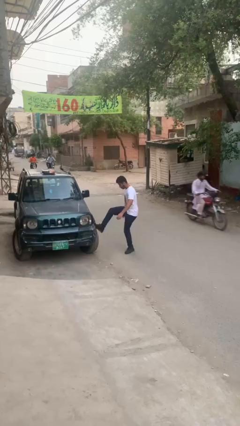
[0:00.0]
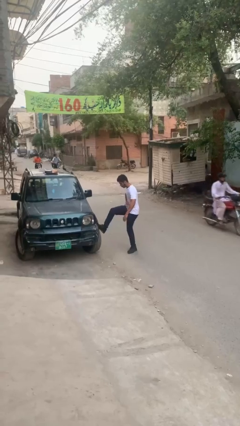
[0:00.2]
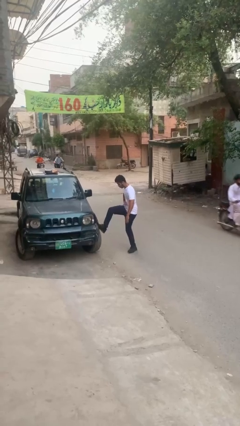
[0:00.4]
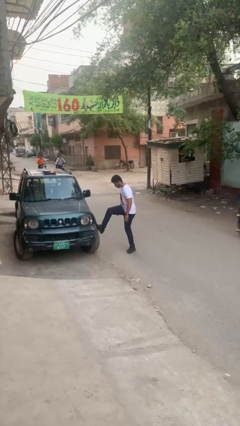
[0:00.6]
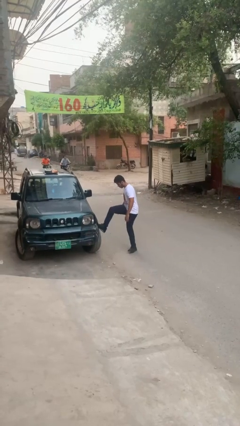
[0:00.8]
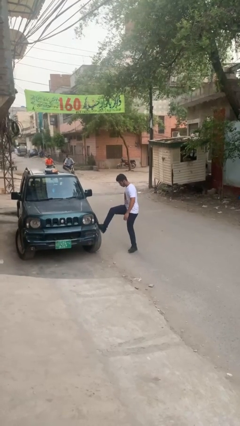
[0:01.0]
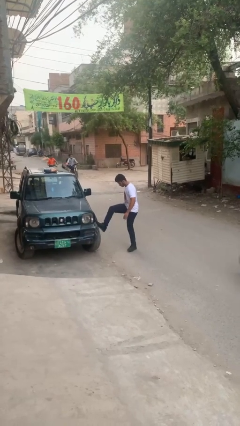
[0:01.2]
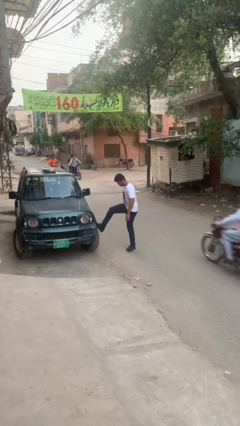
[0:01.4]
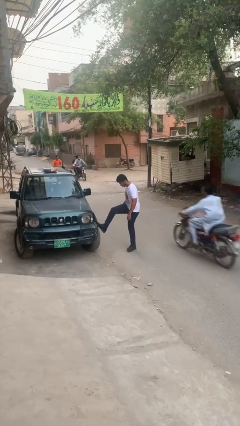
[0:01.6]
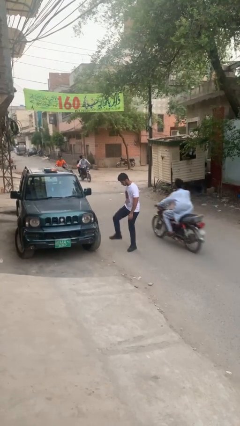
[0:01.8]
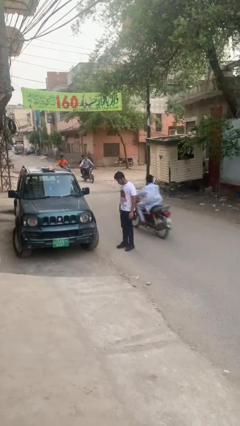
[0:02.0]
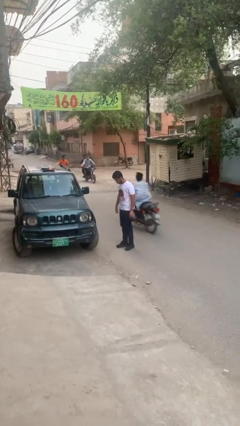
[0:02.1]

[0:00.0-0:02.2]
person kicks car tires

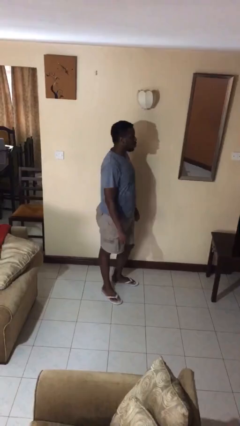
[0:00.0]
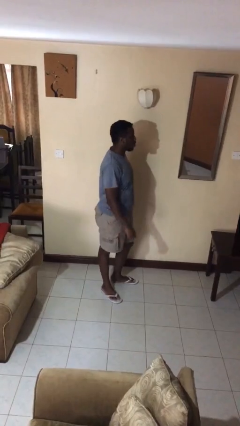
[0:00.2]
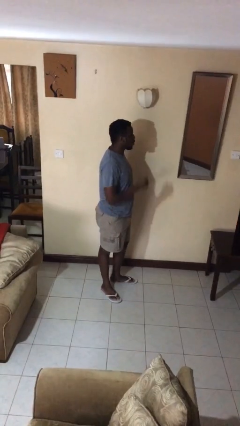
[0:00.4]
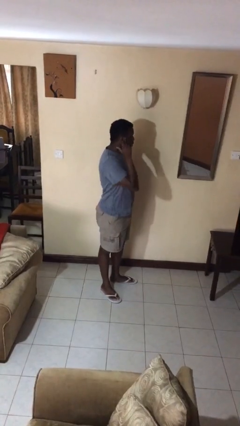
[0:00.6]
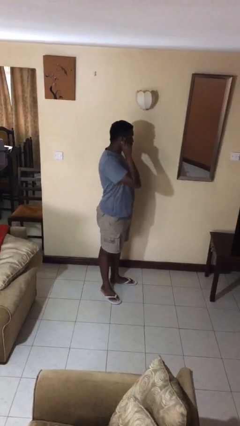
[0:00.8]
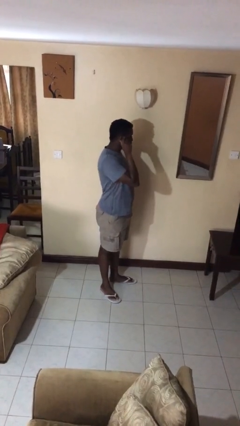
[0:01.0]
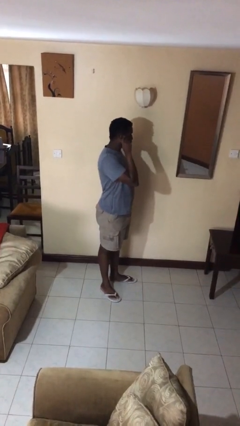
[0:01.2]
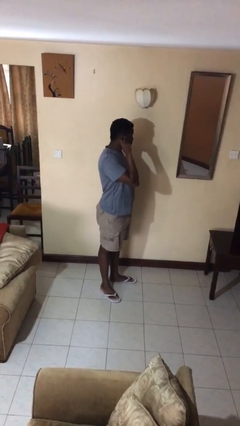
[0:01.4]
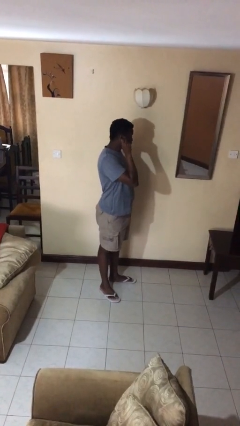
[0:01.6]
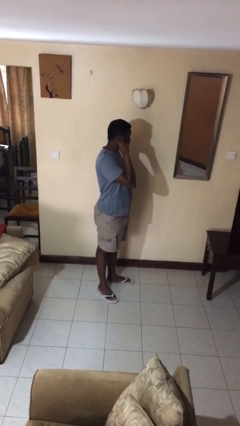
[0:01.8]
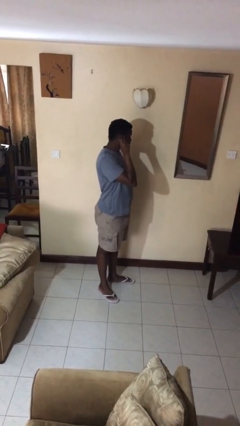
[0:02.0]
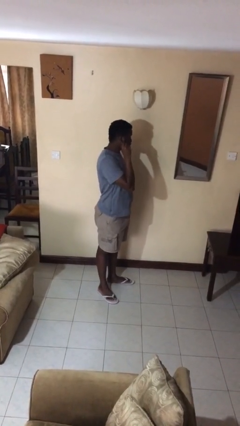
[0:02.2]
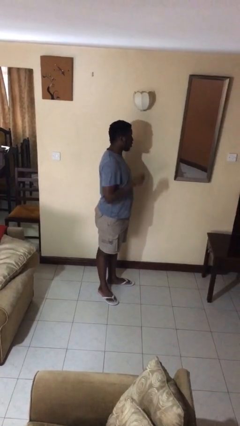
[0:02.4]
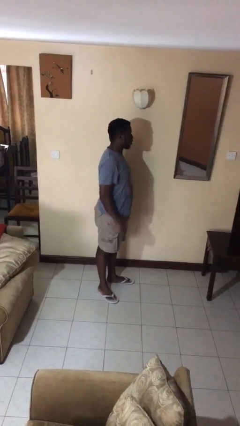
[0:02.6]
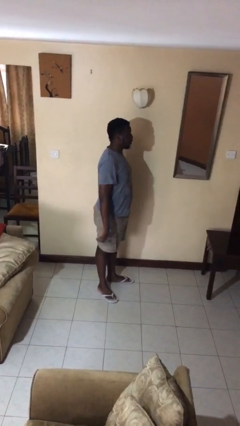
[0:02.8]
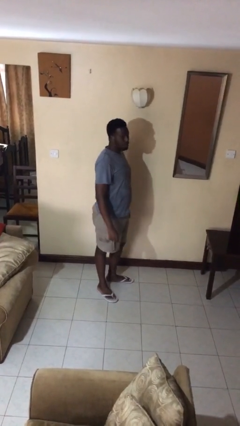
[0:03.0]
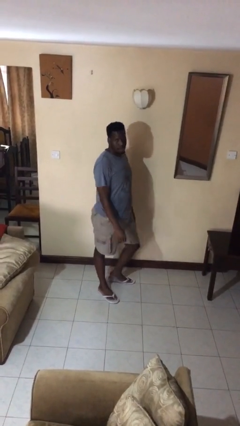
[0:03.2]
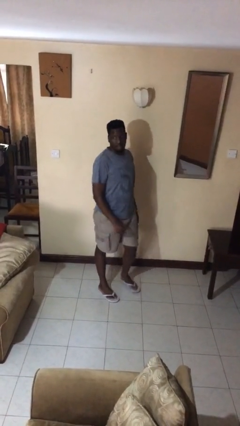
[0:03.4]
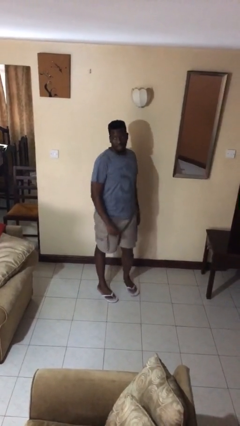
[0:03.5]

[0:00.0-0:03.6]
person touches earlobe

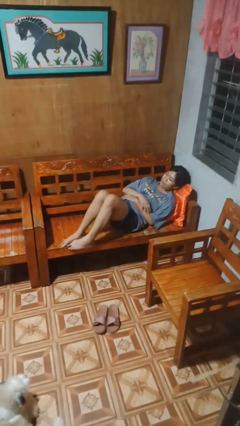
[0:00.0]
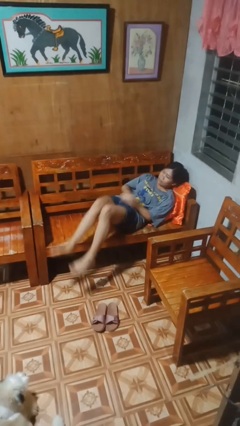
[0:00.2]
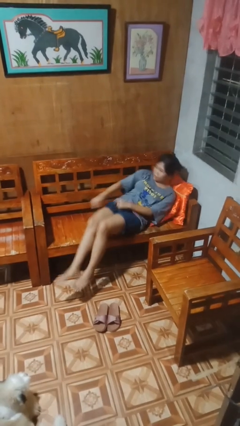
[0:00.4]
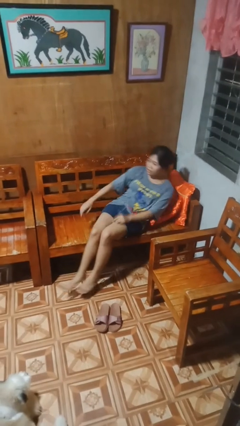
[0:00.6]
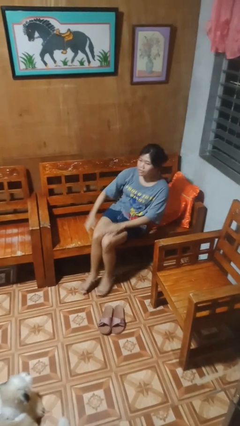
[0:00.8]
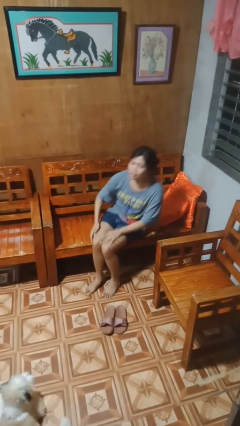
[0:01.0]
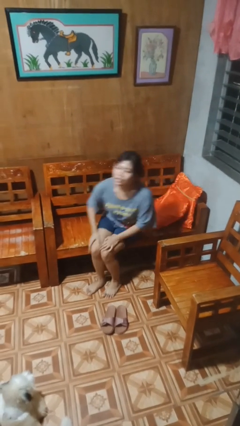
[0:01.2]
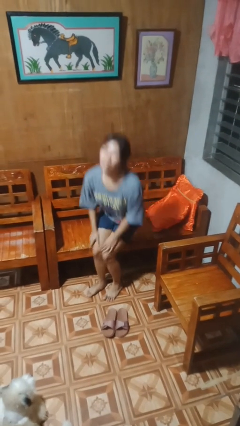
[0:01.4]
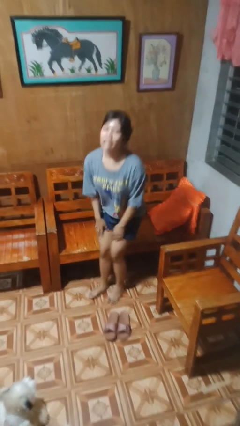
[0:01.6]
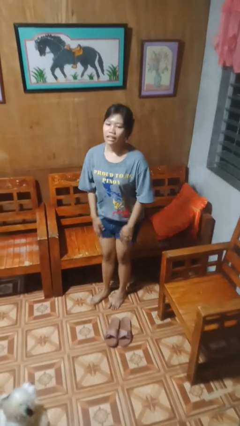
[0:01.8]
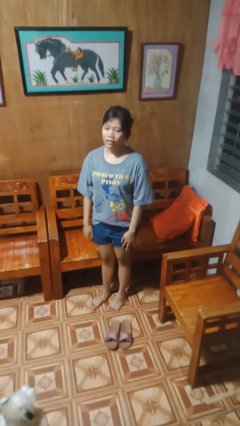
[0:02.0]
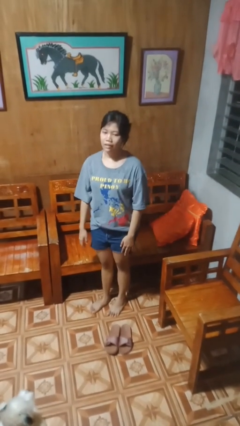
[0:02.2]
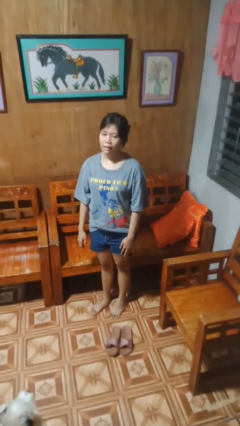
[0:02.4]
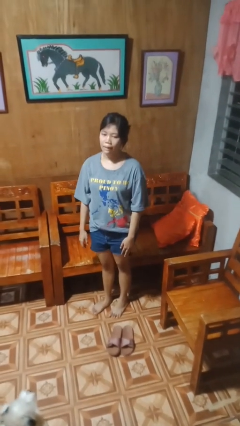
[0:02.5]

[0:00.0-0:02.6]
person stands up

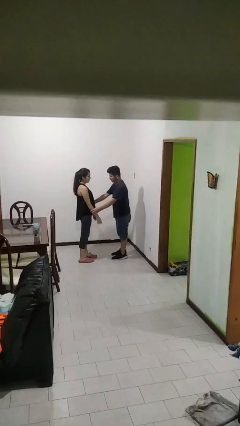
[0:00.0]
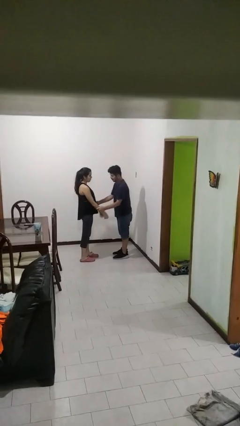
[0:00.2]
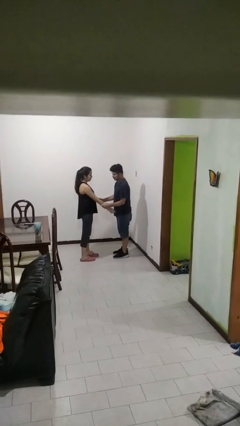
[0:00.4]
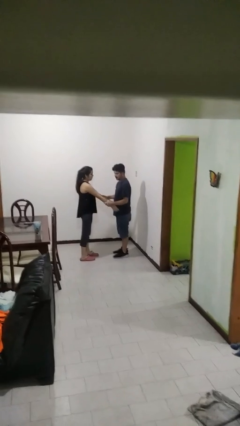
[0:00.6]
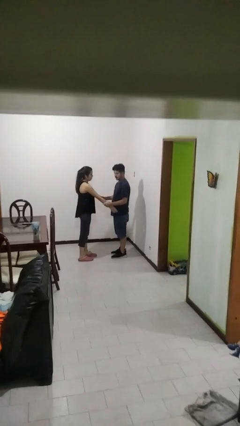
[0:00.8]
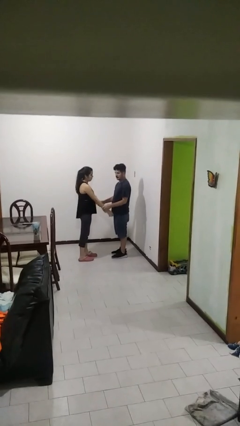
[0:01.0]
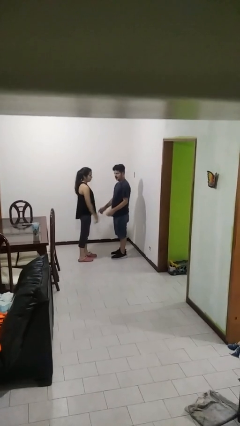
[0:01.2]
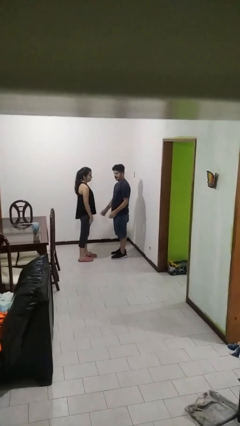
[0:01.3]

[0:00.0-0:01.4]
person grabs person by forearm

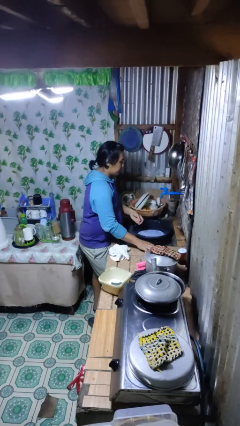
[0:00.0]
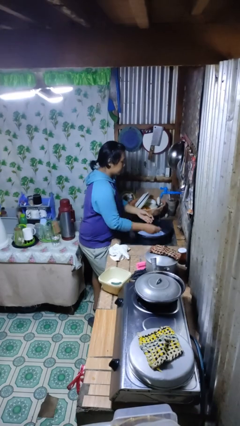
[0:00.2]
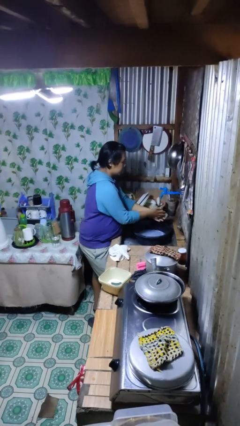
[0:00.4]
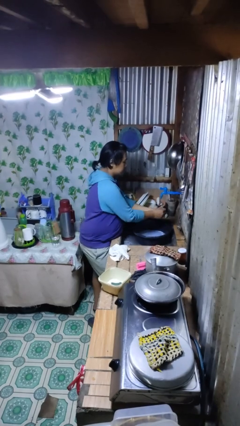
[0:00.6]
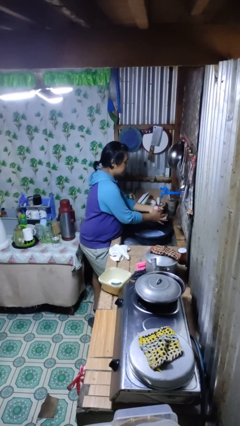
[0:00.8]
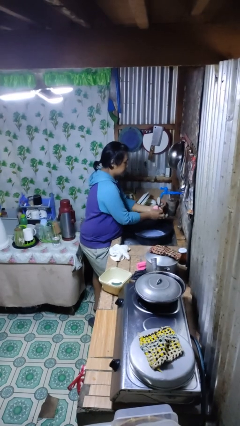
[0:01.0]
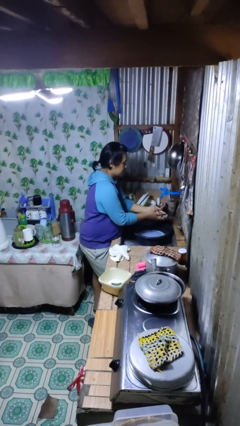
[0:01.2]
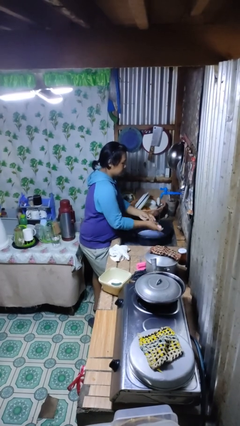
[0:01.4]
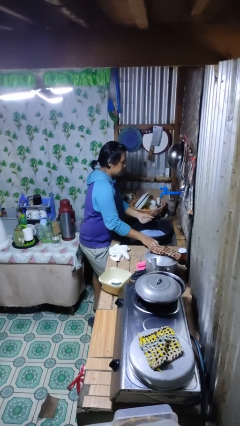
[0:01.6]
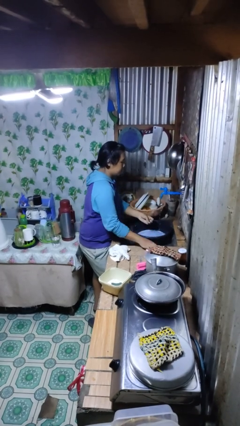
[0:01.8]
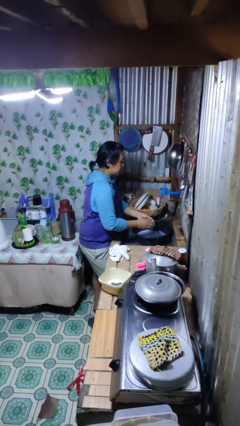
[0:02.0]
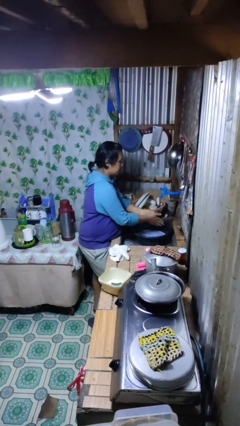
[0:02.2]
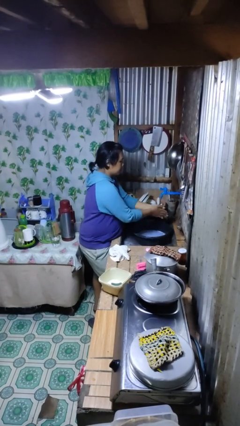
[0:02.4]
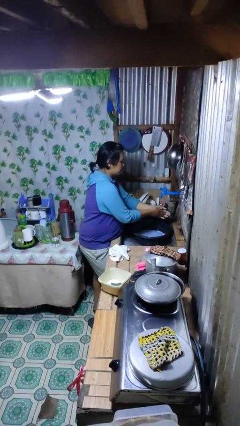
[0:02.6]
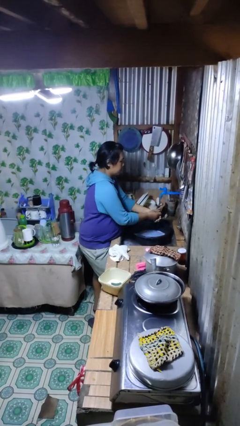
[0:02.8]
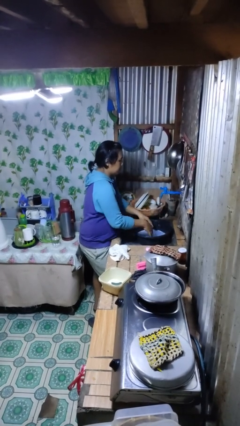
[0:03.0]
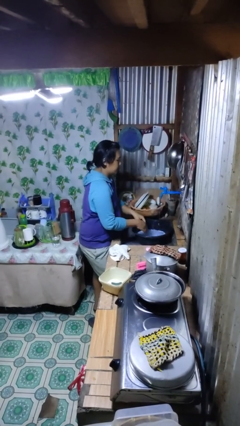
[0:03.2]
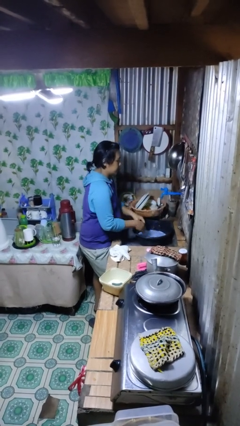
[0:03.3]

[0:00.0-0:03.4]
person washes hands

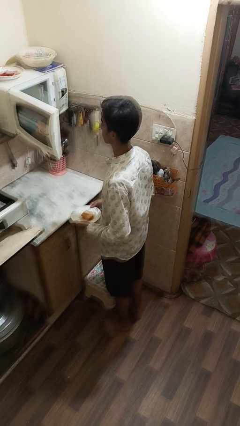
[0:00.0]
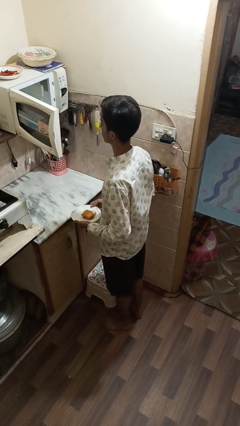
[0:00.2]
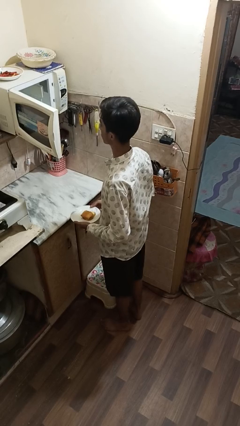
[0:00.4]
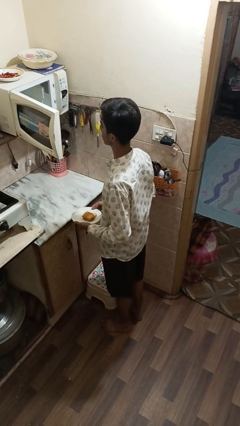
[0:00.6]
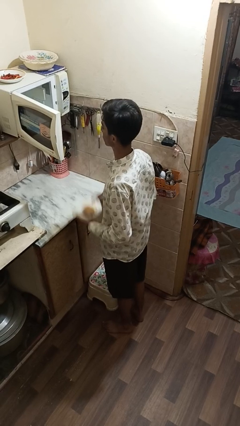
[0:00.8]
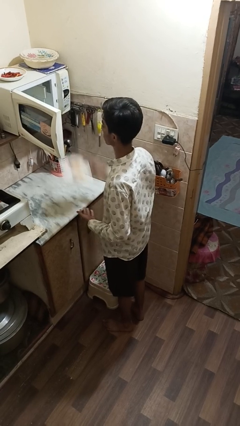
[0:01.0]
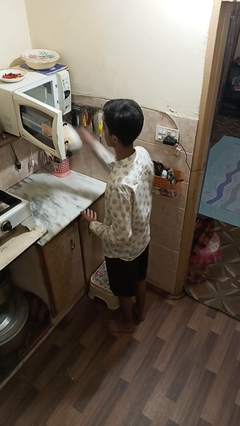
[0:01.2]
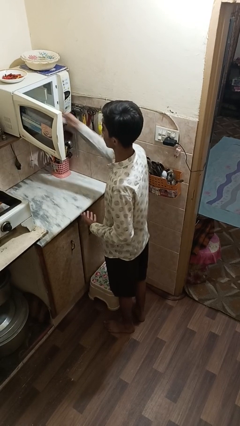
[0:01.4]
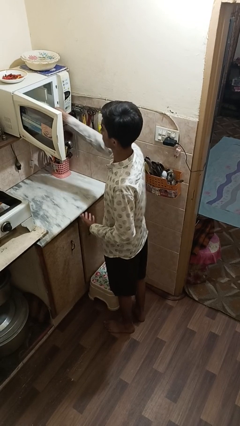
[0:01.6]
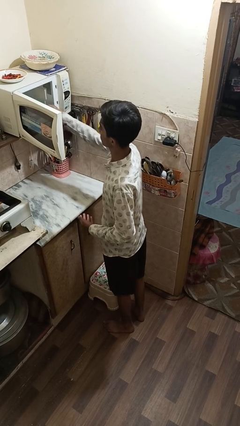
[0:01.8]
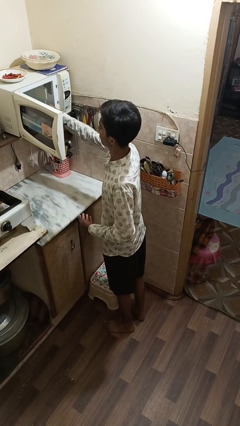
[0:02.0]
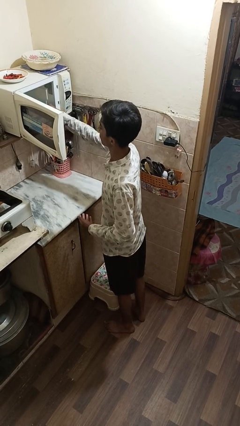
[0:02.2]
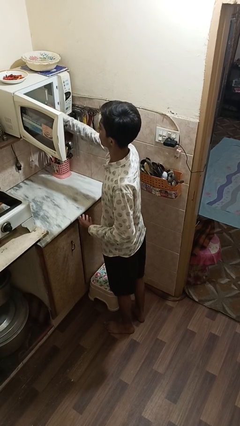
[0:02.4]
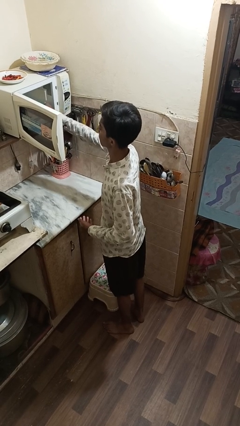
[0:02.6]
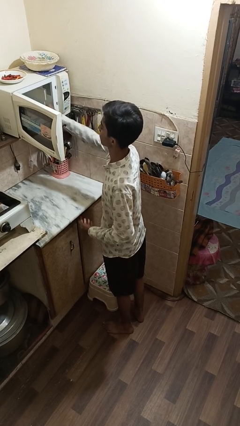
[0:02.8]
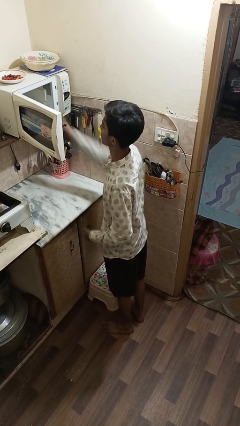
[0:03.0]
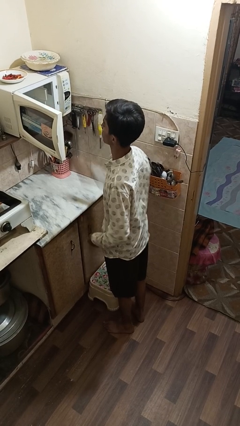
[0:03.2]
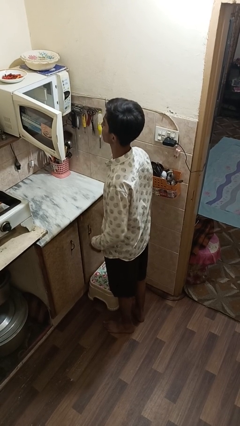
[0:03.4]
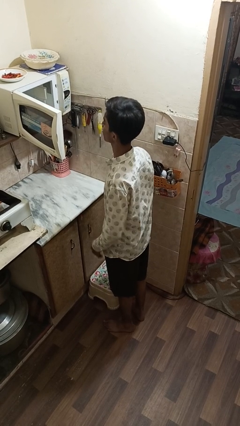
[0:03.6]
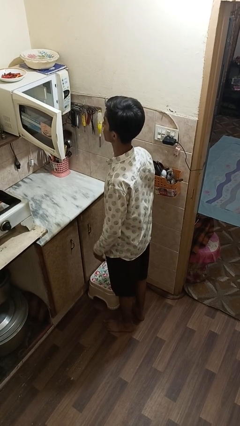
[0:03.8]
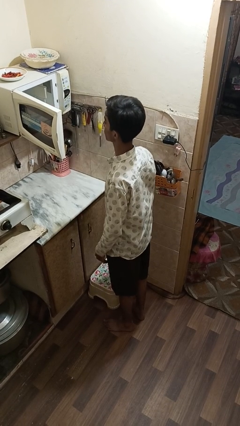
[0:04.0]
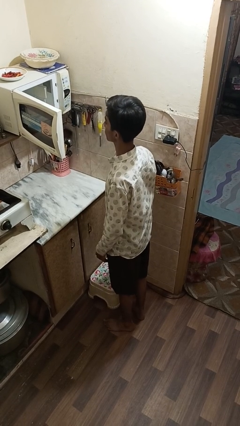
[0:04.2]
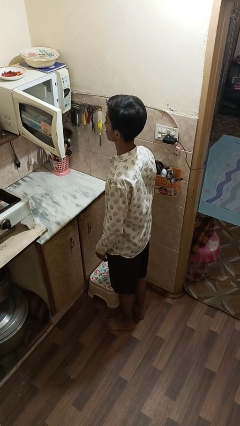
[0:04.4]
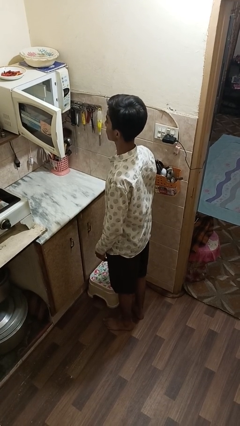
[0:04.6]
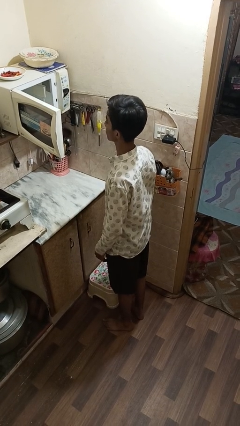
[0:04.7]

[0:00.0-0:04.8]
person puts object into microwave
